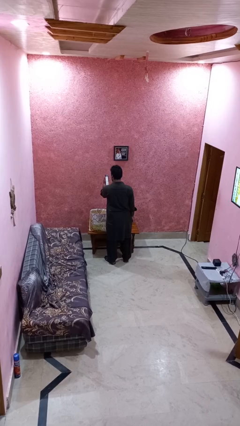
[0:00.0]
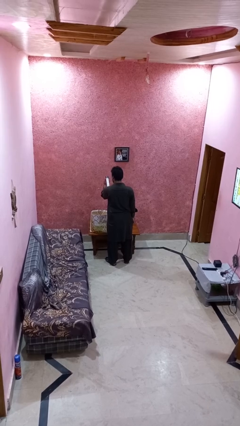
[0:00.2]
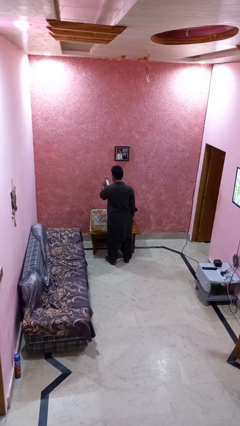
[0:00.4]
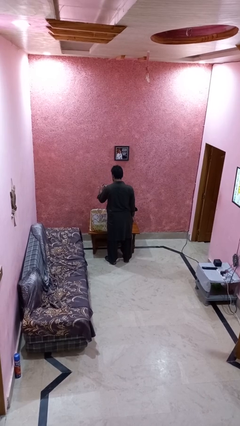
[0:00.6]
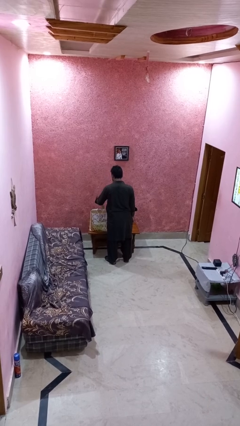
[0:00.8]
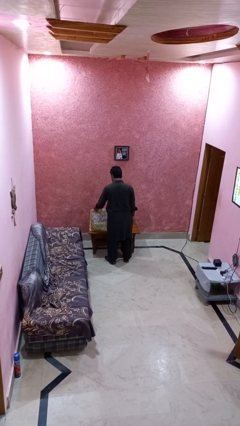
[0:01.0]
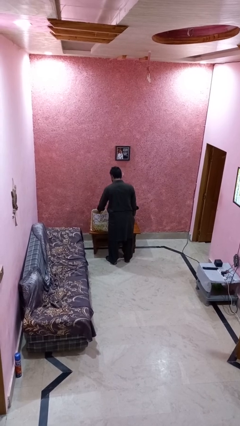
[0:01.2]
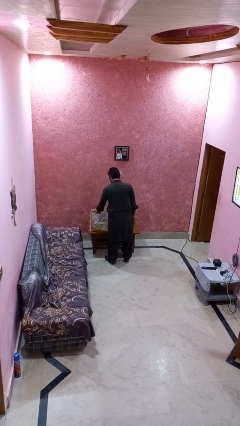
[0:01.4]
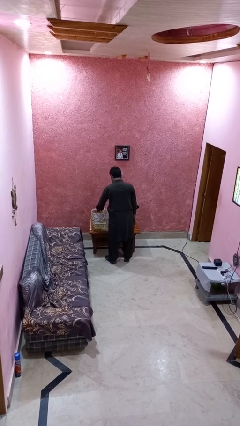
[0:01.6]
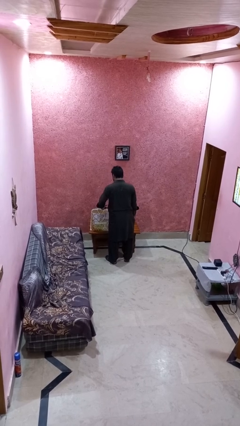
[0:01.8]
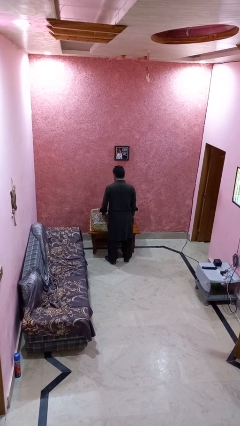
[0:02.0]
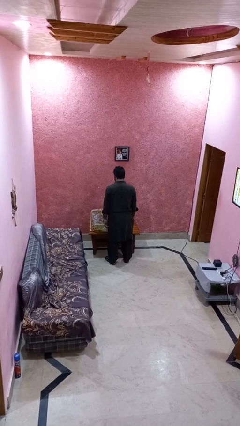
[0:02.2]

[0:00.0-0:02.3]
person puts object into bag

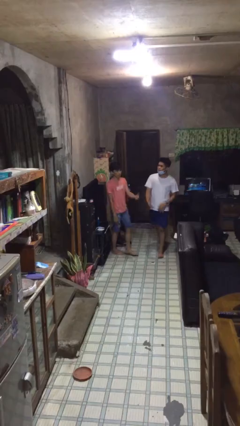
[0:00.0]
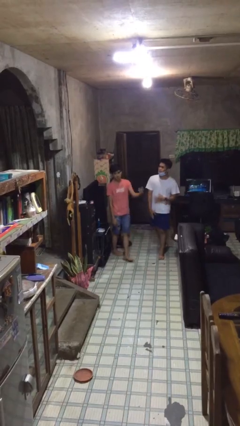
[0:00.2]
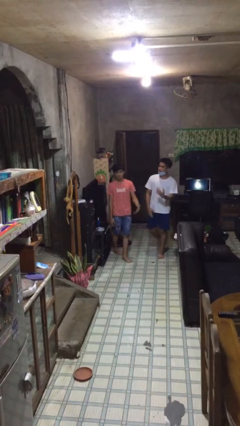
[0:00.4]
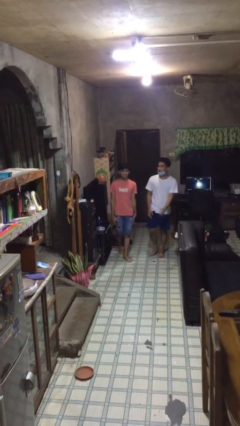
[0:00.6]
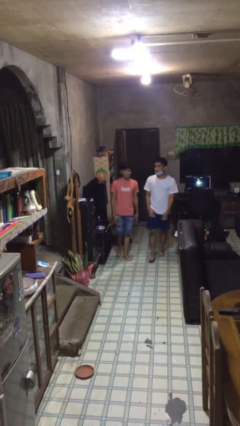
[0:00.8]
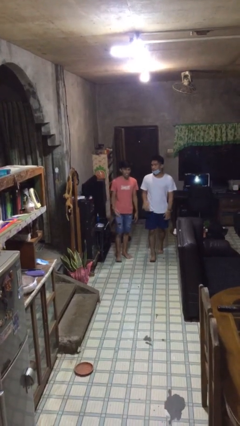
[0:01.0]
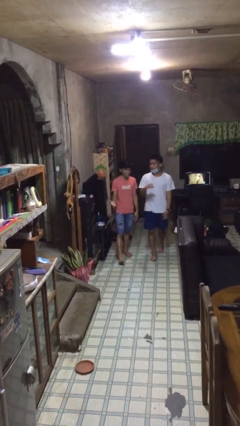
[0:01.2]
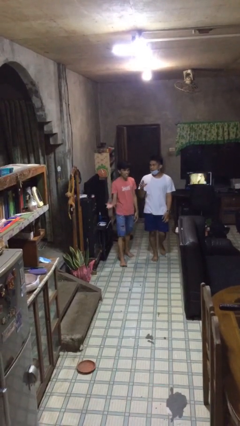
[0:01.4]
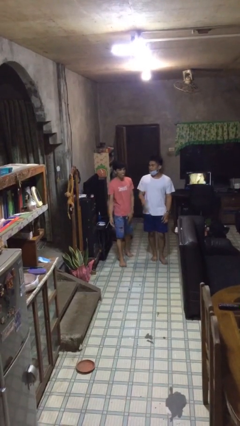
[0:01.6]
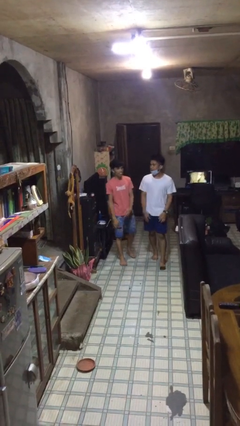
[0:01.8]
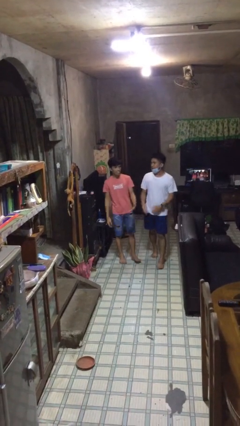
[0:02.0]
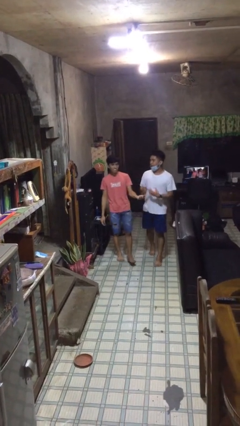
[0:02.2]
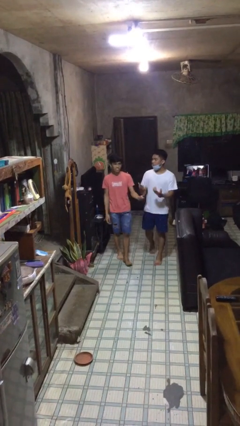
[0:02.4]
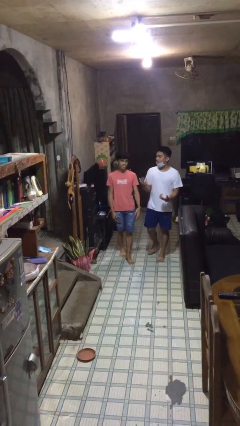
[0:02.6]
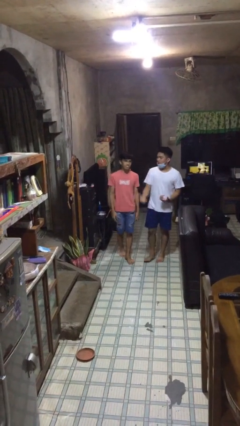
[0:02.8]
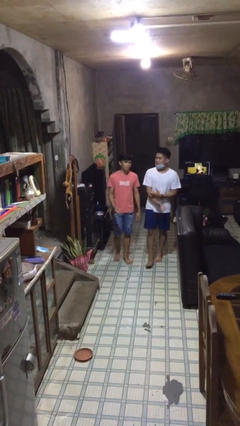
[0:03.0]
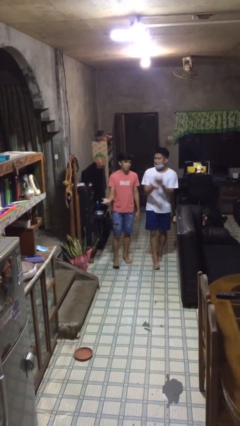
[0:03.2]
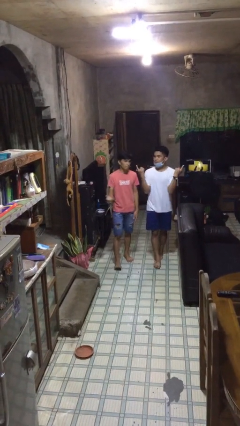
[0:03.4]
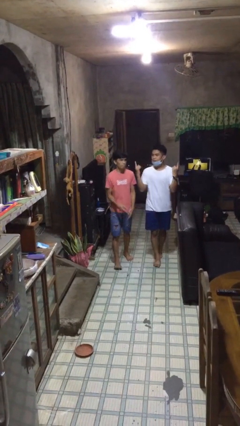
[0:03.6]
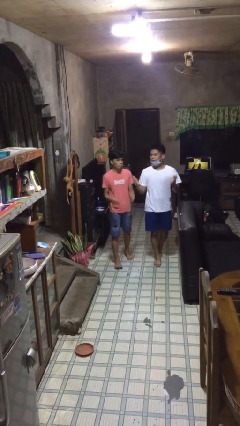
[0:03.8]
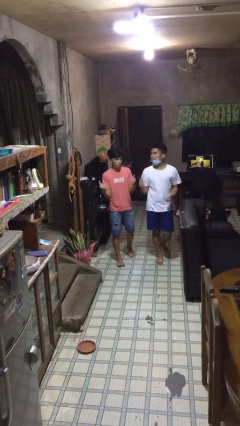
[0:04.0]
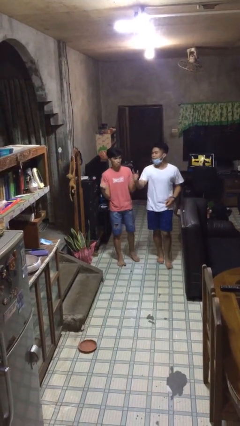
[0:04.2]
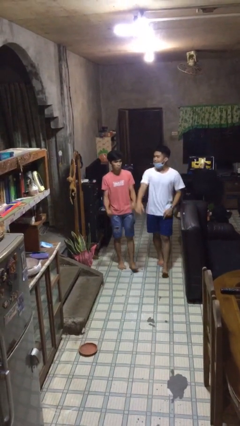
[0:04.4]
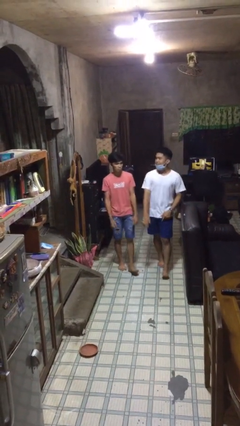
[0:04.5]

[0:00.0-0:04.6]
person talks to person

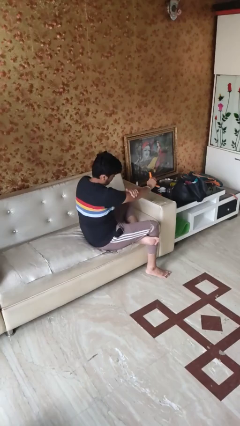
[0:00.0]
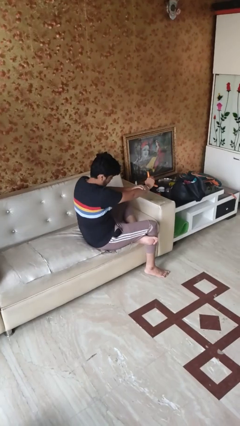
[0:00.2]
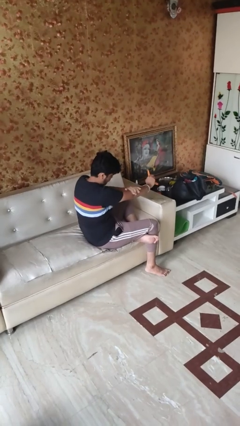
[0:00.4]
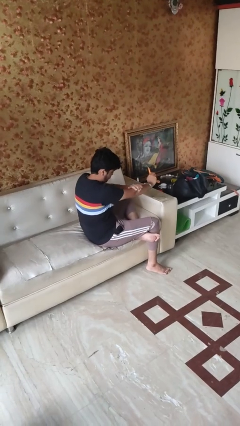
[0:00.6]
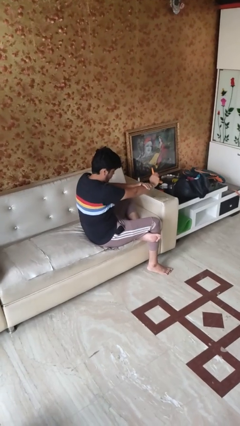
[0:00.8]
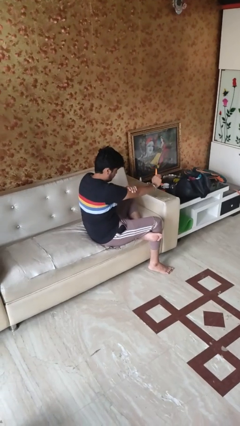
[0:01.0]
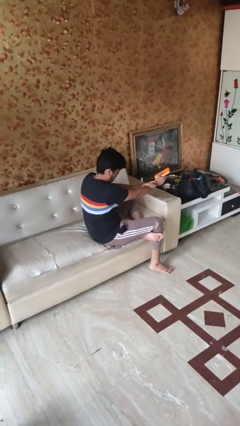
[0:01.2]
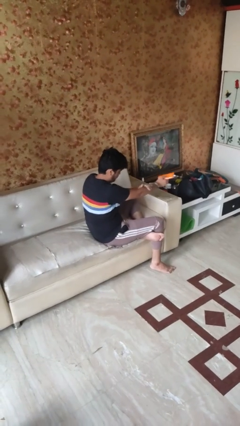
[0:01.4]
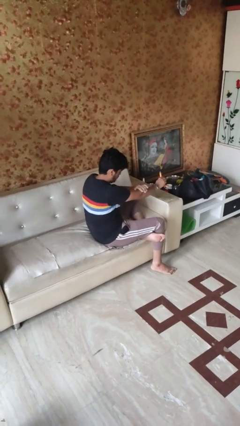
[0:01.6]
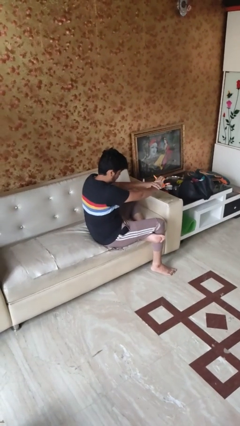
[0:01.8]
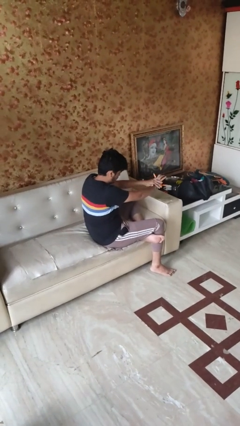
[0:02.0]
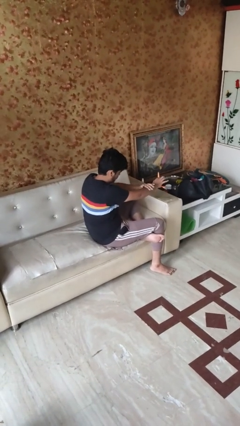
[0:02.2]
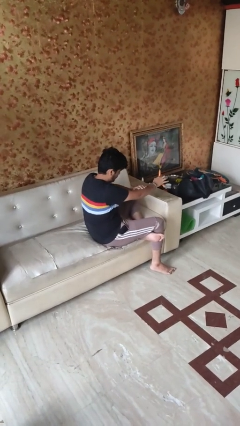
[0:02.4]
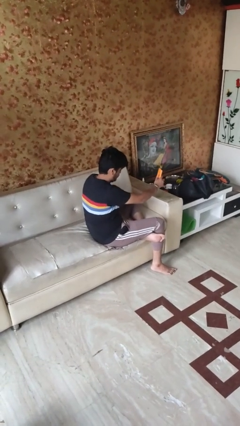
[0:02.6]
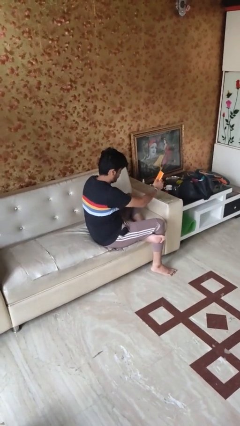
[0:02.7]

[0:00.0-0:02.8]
person applies sunscreen

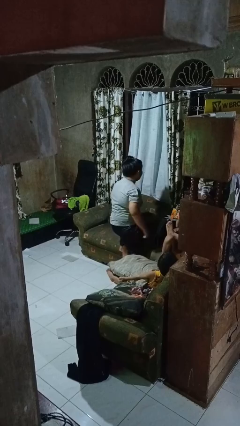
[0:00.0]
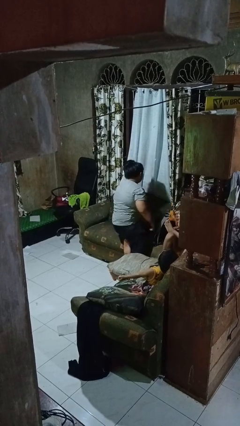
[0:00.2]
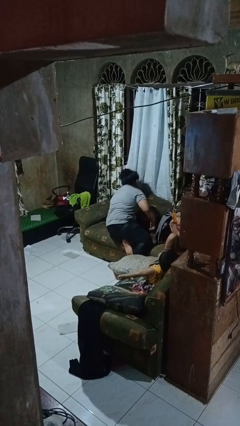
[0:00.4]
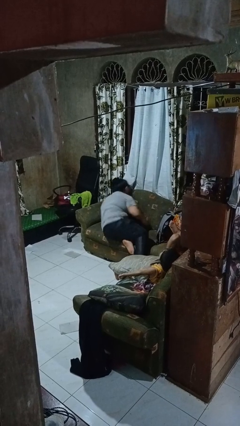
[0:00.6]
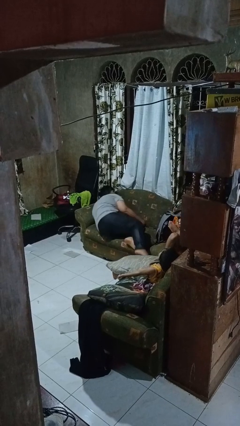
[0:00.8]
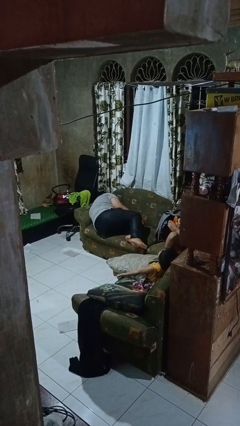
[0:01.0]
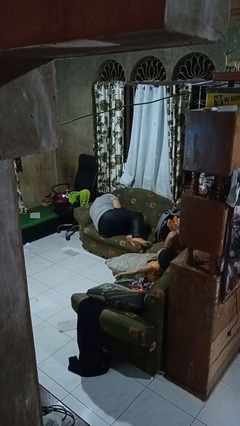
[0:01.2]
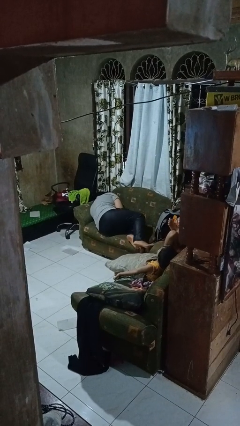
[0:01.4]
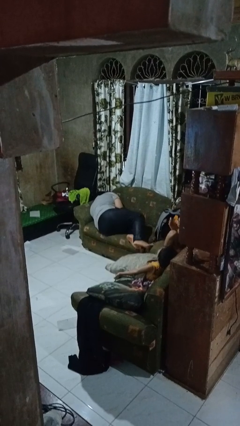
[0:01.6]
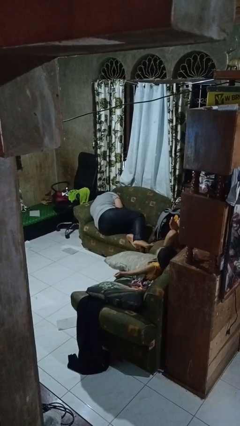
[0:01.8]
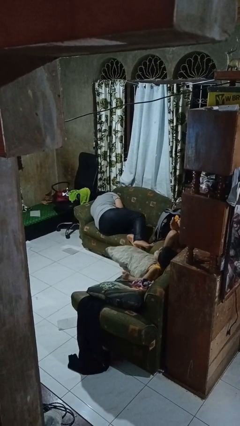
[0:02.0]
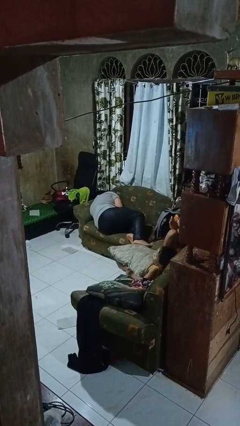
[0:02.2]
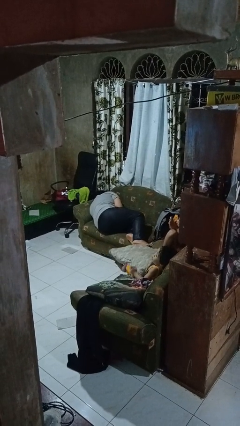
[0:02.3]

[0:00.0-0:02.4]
person lies down on couch

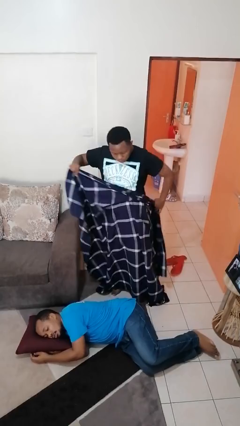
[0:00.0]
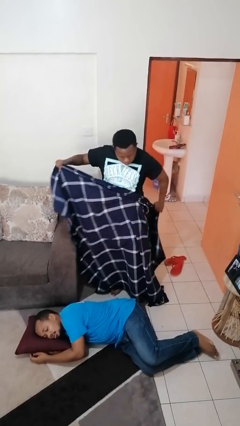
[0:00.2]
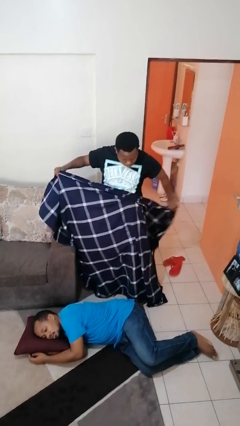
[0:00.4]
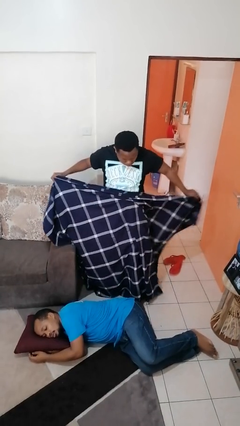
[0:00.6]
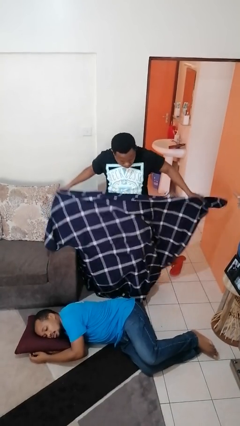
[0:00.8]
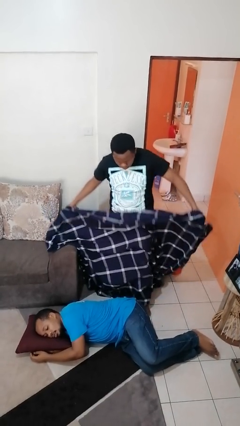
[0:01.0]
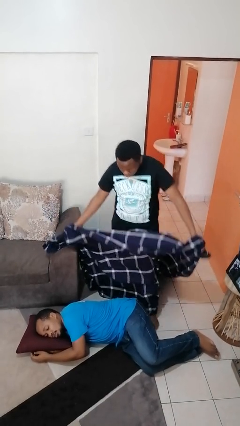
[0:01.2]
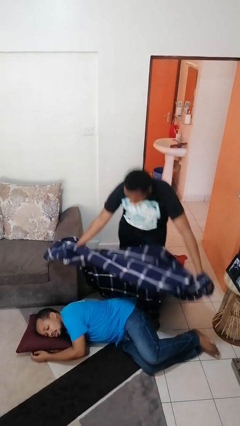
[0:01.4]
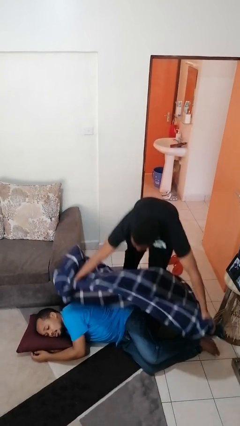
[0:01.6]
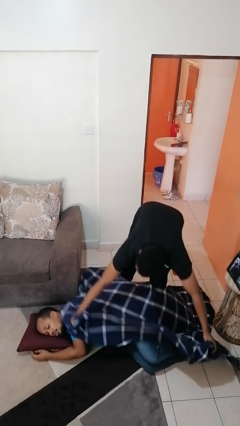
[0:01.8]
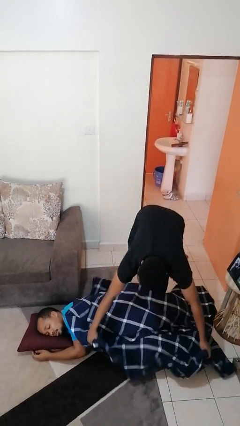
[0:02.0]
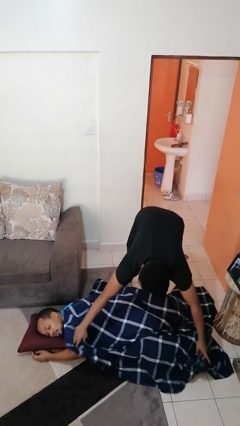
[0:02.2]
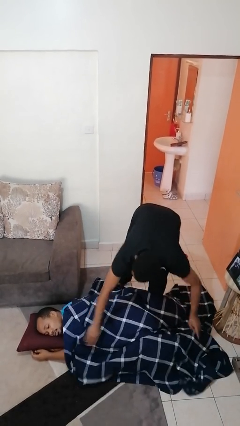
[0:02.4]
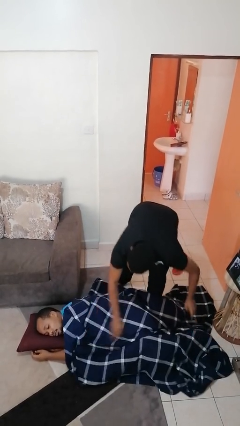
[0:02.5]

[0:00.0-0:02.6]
person covers friend with blanket

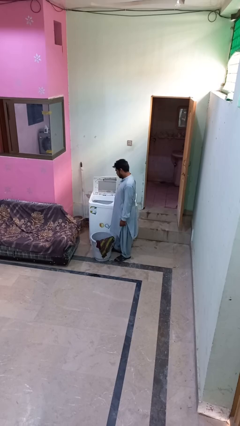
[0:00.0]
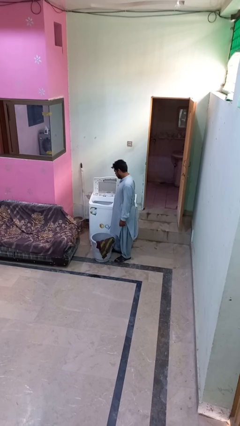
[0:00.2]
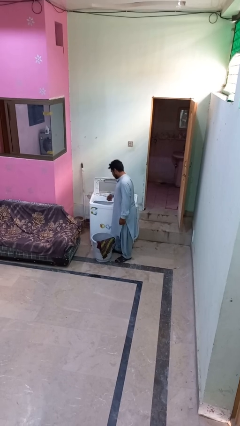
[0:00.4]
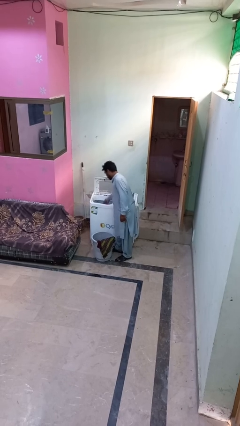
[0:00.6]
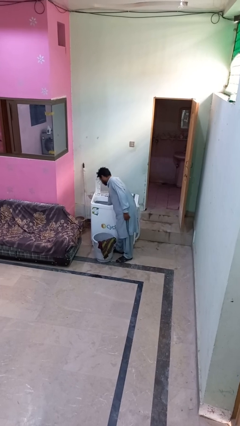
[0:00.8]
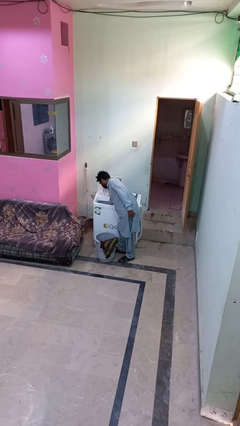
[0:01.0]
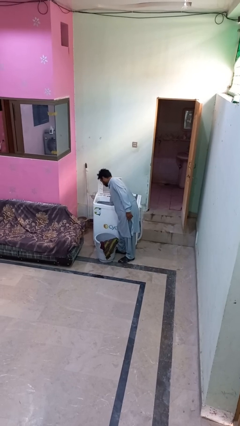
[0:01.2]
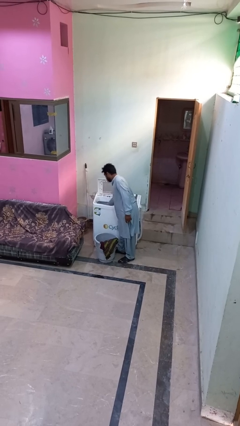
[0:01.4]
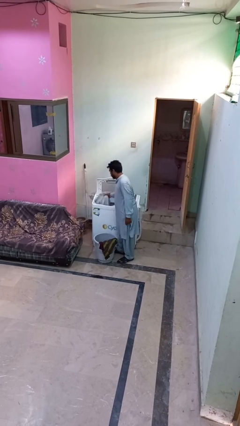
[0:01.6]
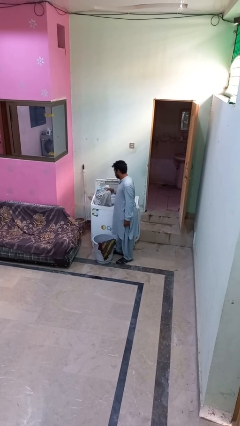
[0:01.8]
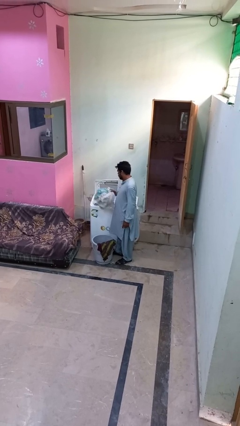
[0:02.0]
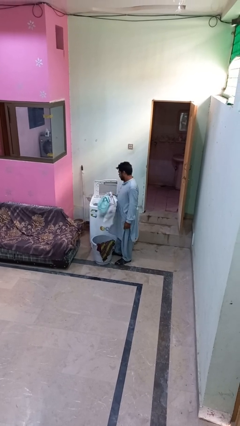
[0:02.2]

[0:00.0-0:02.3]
person unloads clotheswasher

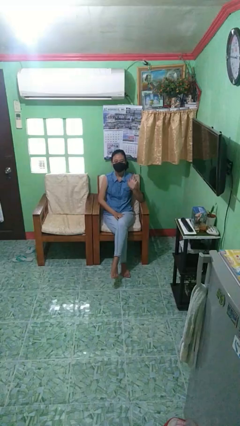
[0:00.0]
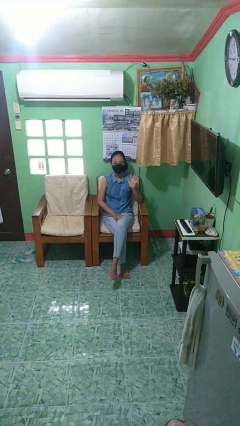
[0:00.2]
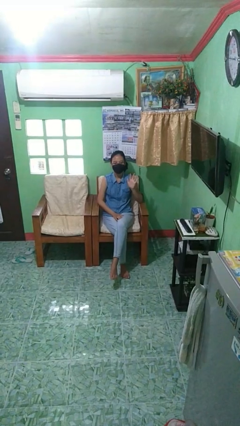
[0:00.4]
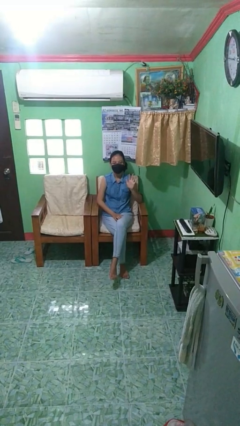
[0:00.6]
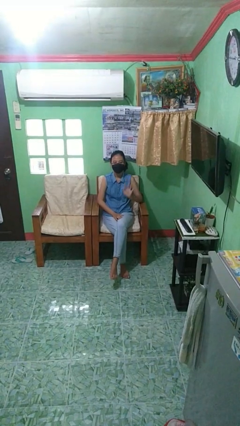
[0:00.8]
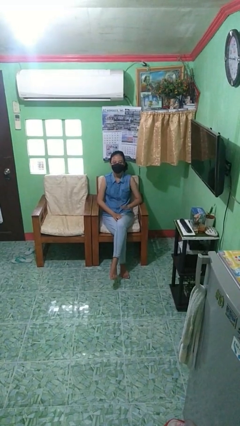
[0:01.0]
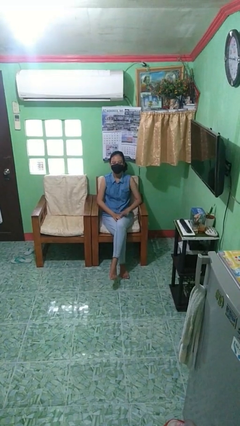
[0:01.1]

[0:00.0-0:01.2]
person gestures number five
